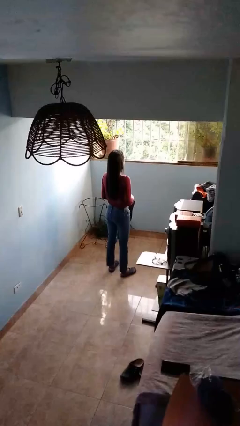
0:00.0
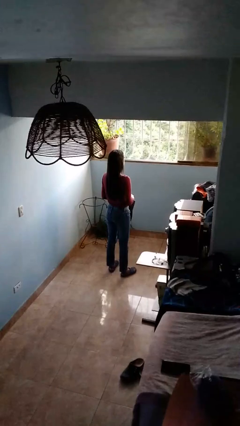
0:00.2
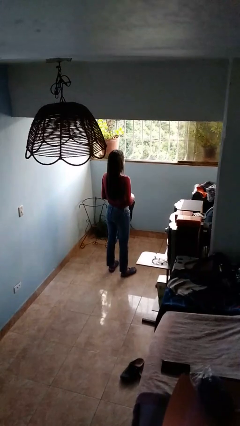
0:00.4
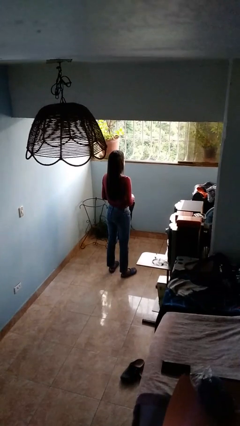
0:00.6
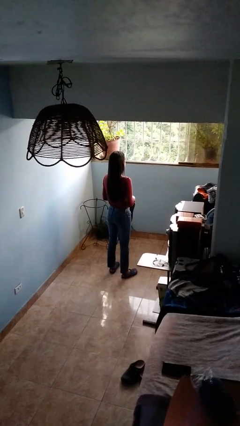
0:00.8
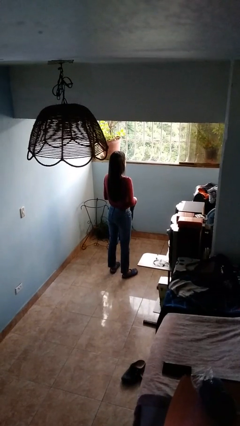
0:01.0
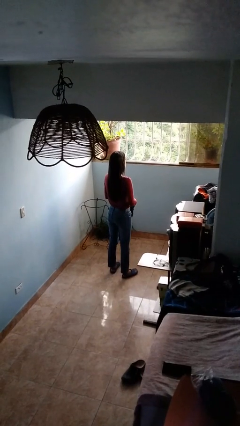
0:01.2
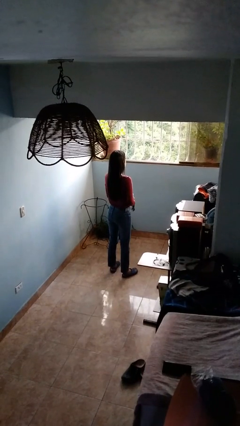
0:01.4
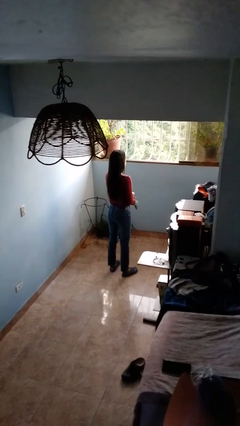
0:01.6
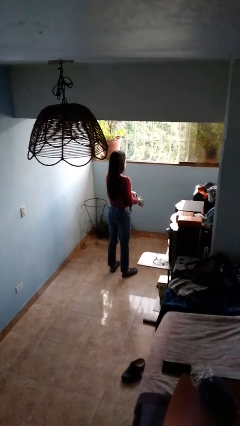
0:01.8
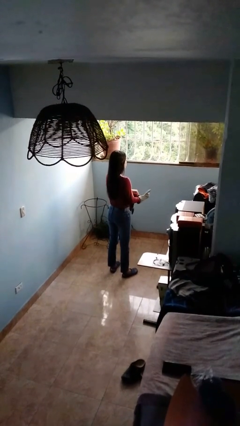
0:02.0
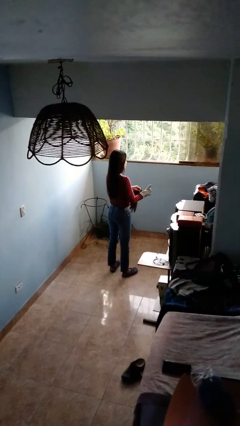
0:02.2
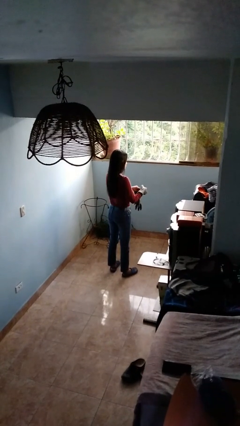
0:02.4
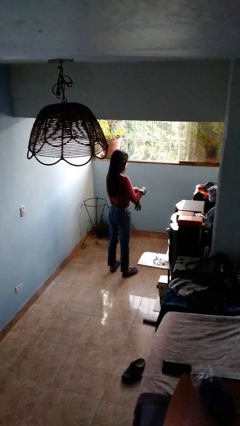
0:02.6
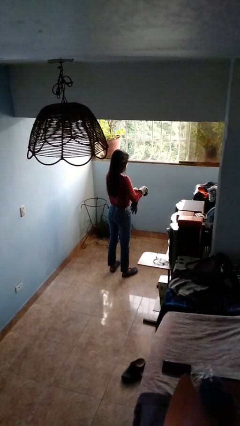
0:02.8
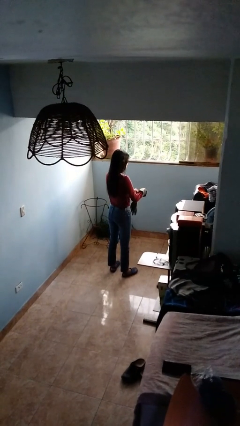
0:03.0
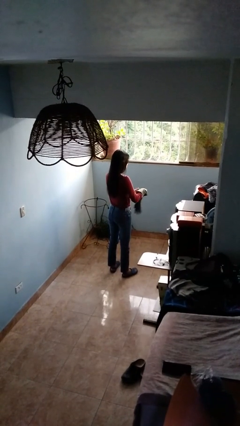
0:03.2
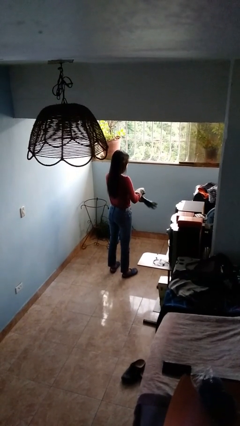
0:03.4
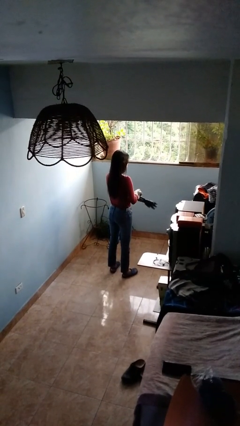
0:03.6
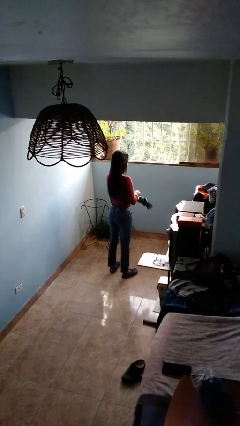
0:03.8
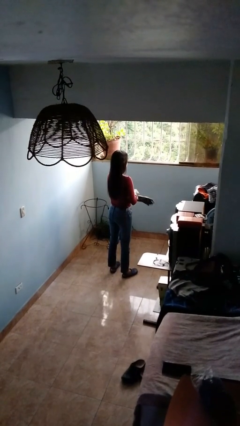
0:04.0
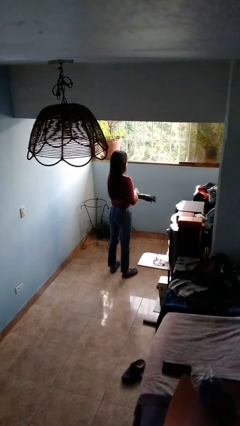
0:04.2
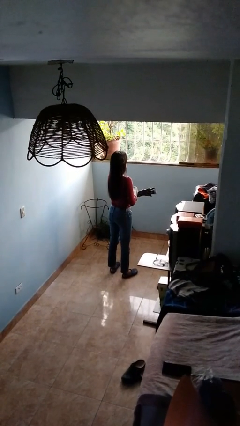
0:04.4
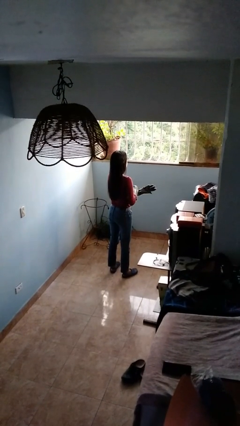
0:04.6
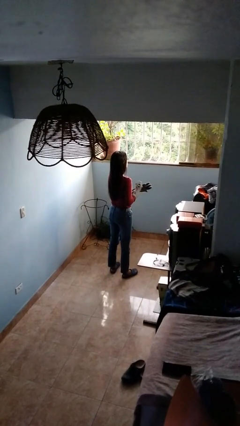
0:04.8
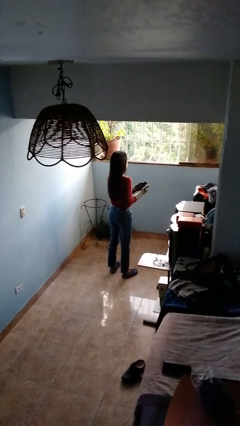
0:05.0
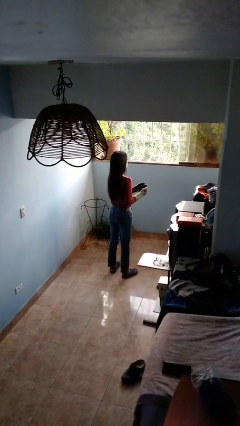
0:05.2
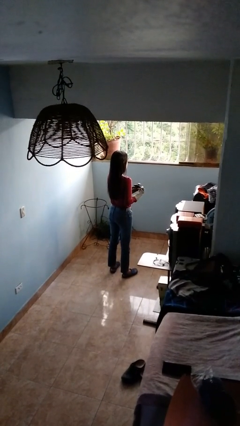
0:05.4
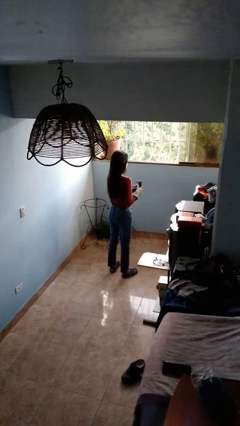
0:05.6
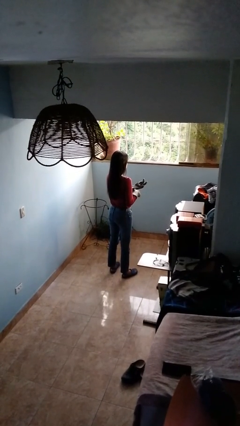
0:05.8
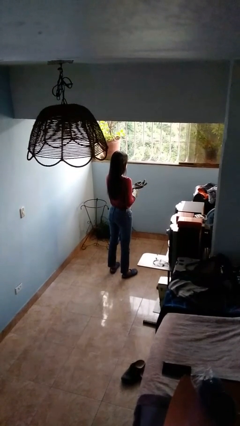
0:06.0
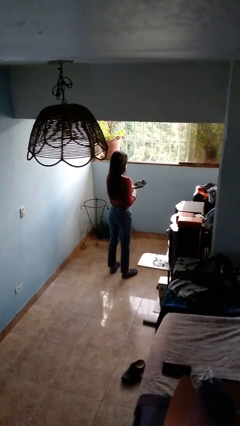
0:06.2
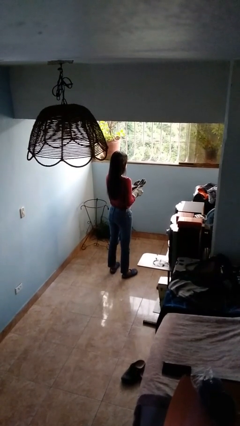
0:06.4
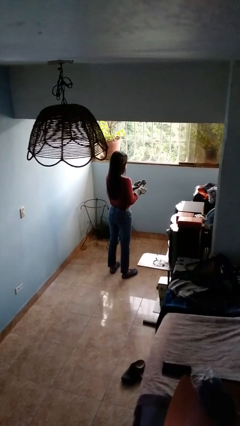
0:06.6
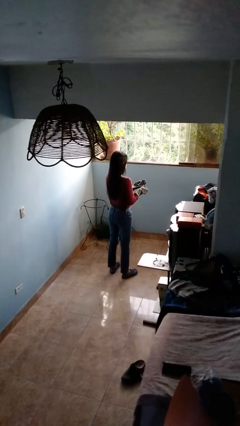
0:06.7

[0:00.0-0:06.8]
person puts on gloves

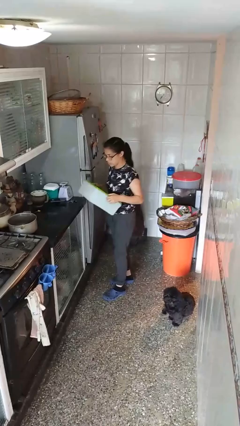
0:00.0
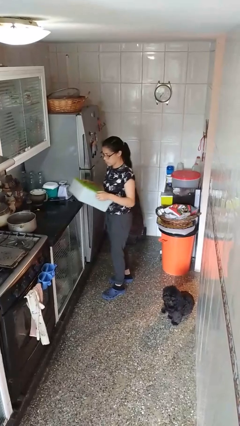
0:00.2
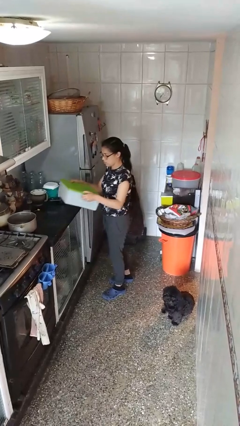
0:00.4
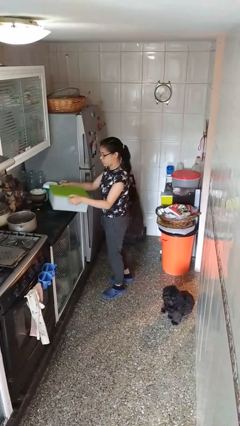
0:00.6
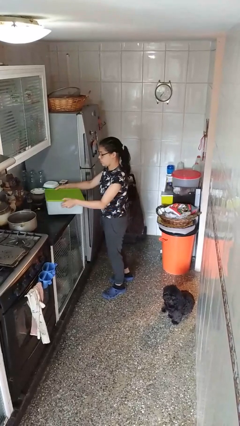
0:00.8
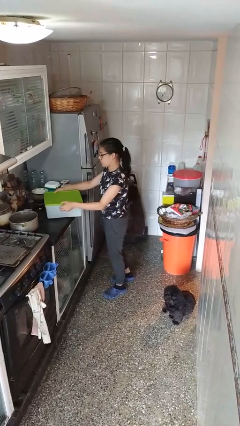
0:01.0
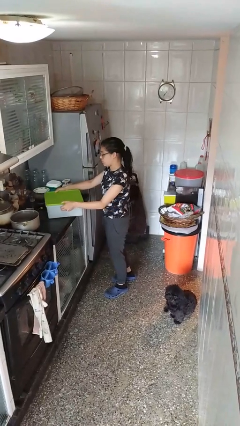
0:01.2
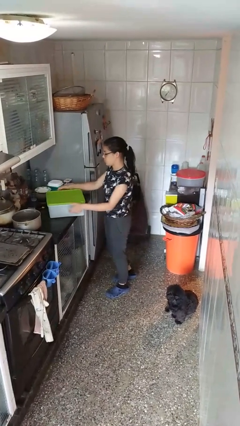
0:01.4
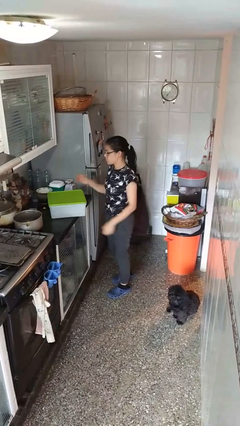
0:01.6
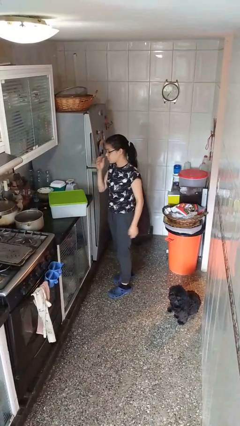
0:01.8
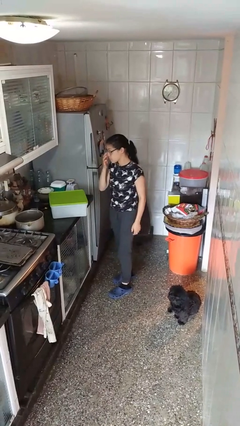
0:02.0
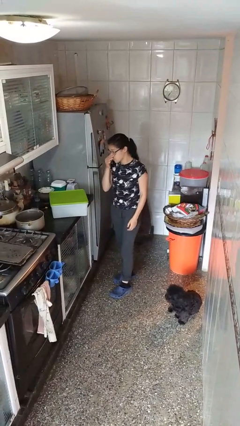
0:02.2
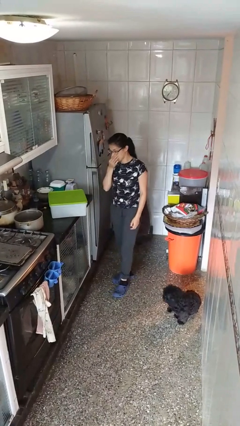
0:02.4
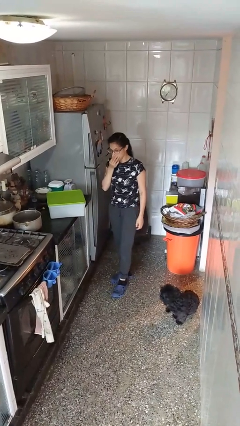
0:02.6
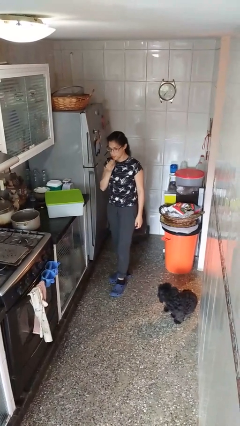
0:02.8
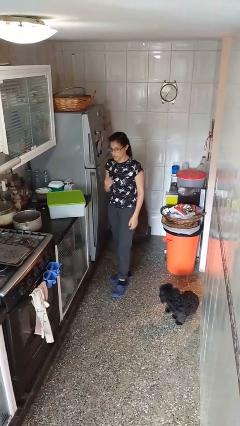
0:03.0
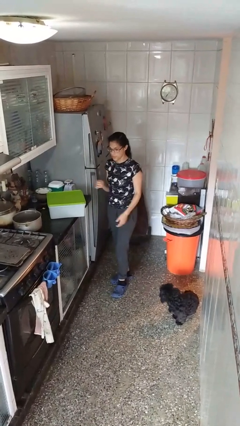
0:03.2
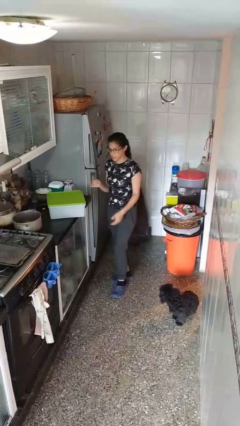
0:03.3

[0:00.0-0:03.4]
person puts down object on countertop

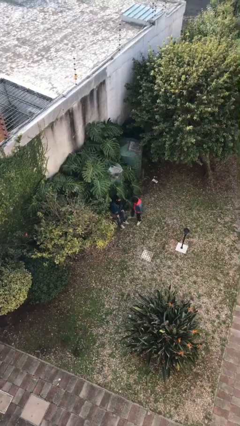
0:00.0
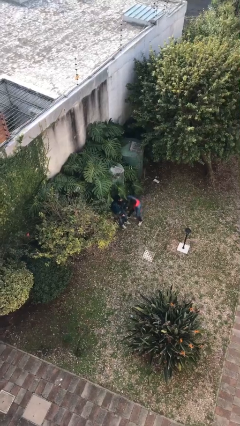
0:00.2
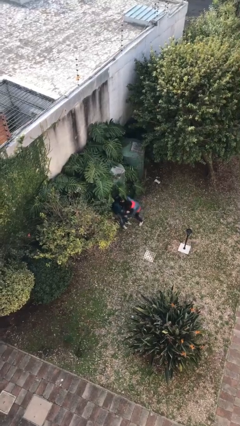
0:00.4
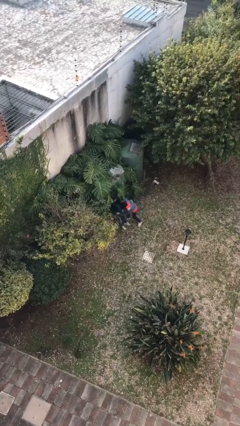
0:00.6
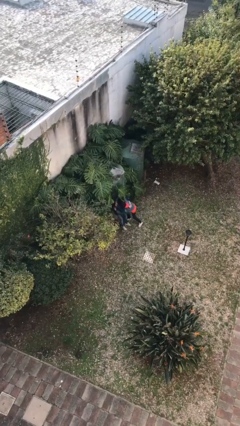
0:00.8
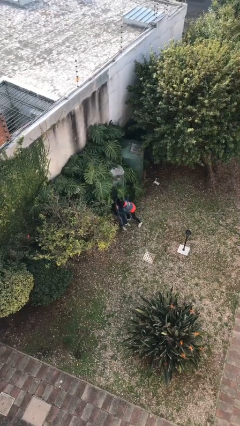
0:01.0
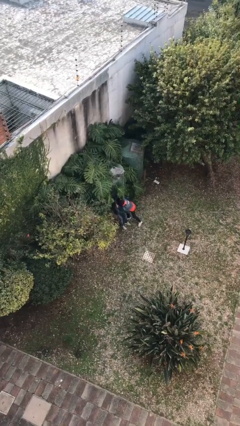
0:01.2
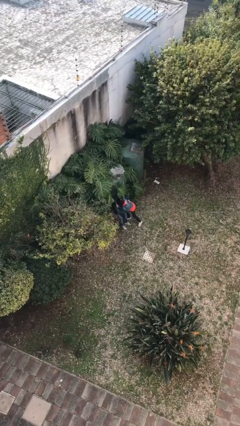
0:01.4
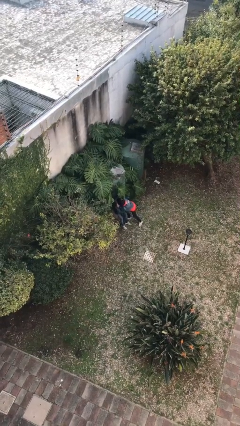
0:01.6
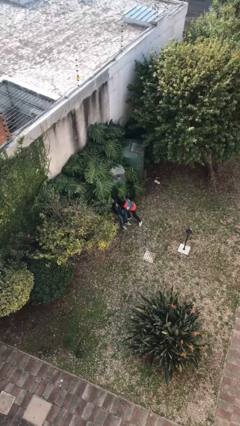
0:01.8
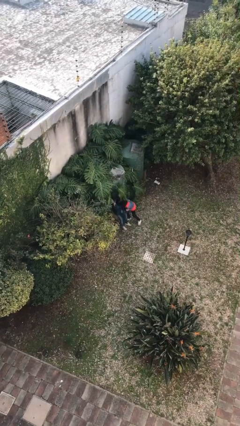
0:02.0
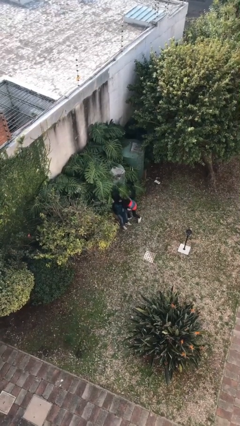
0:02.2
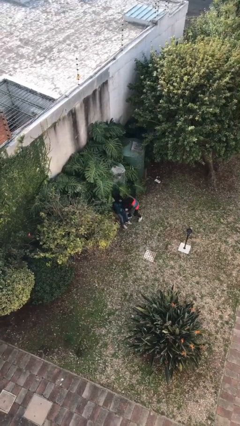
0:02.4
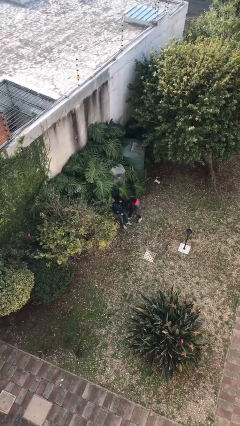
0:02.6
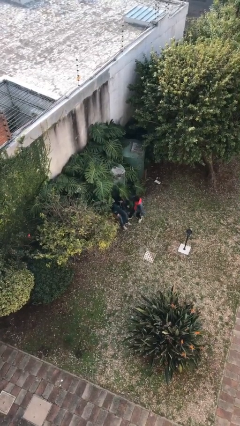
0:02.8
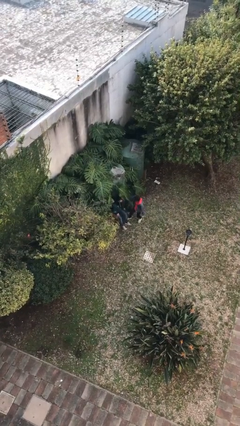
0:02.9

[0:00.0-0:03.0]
person embraces person

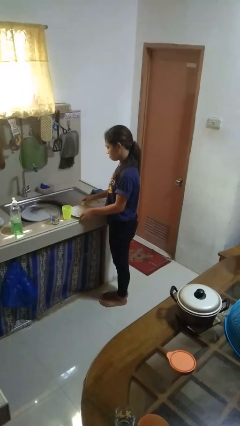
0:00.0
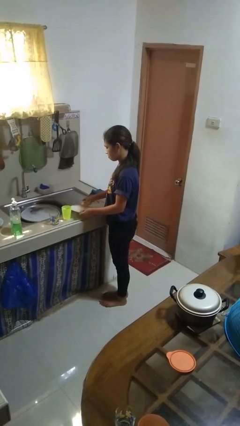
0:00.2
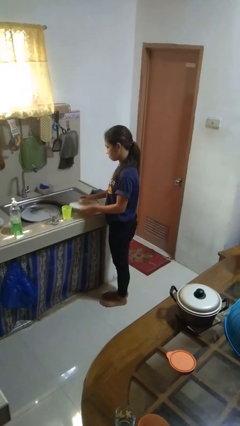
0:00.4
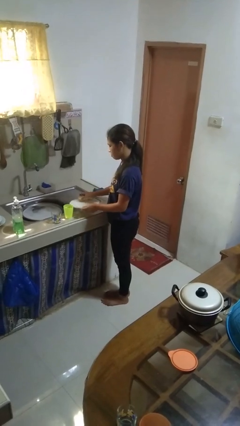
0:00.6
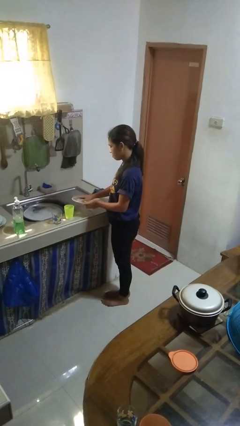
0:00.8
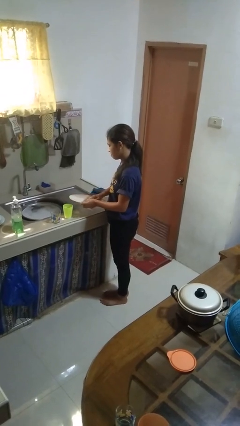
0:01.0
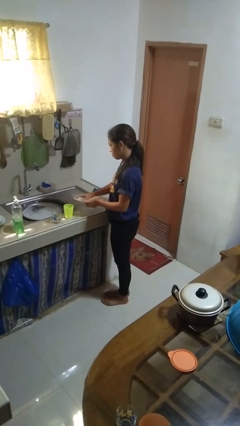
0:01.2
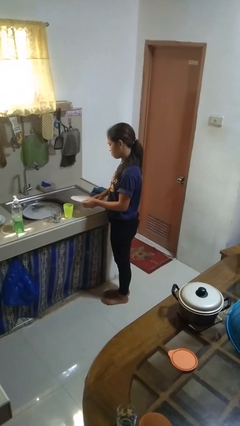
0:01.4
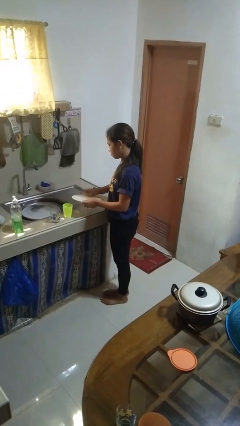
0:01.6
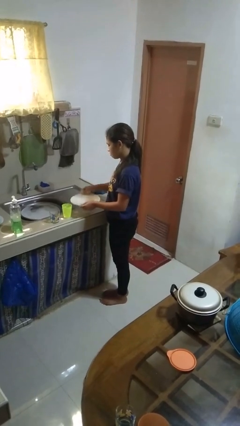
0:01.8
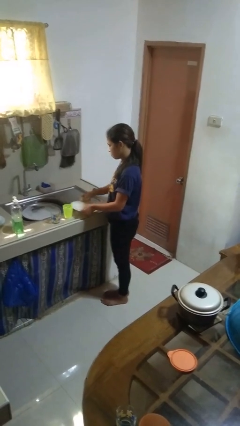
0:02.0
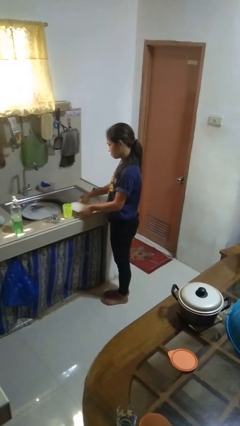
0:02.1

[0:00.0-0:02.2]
person washes dish

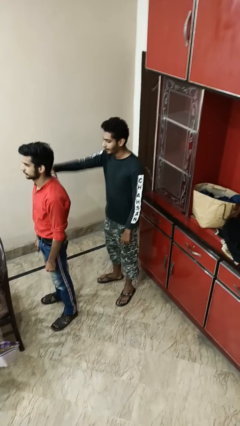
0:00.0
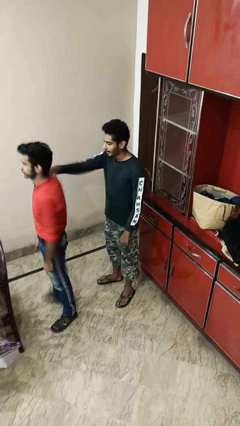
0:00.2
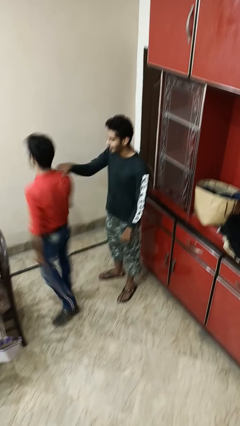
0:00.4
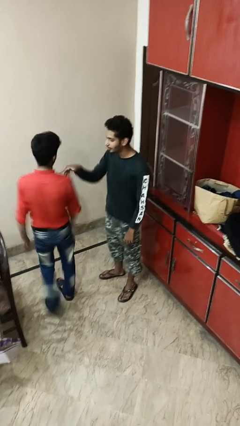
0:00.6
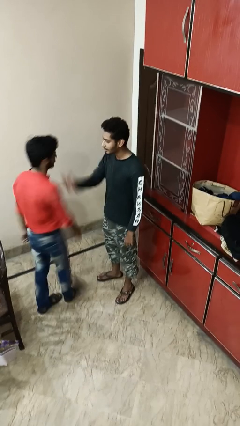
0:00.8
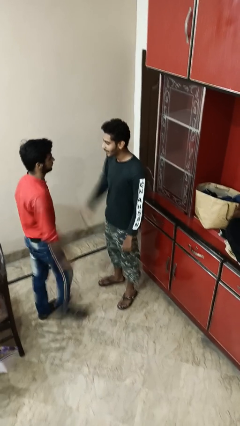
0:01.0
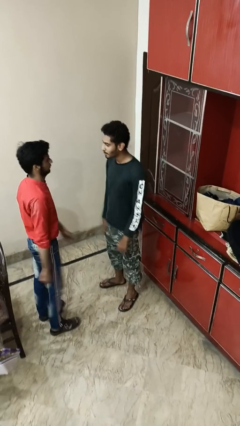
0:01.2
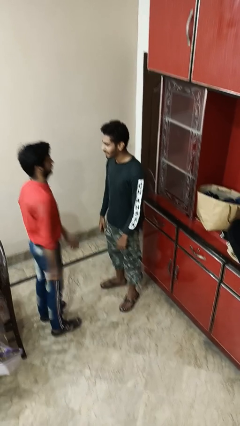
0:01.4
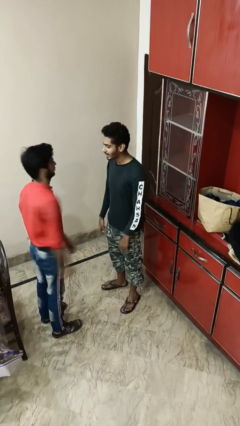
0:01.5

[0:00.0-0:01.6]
person spins person around

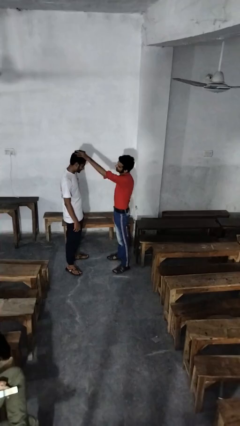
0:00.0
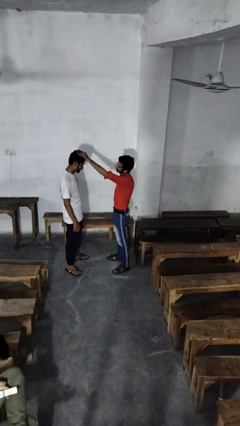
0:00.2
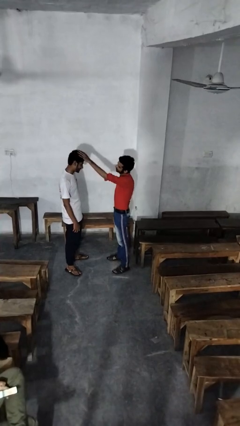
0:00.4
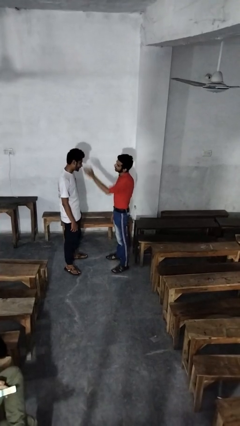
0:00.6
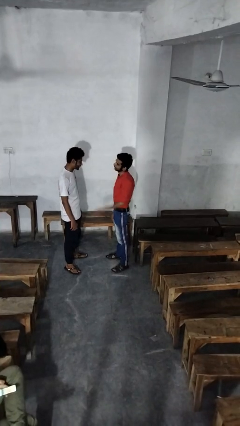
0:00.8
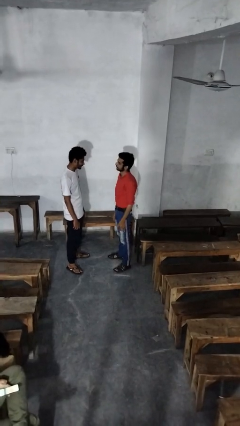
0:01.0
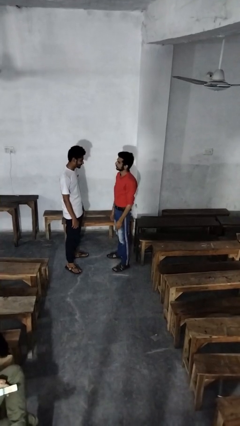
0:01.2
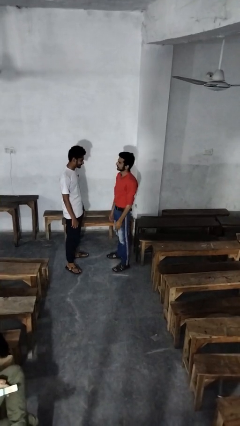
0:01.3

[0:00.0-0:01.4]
person grabs person by hair
